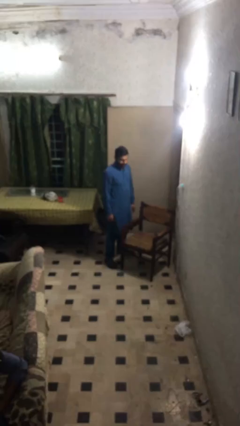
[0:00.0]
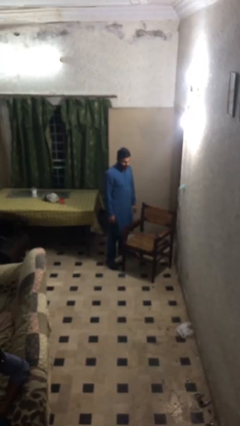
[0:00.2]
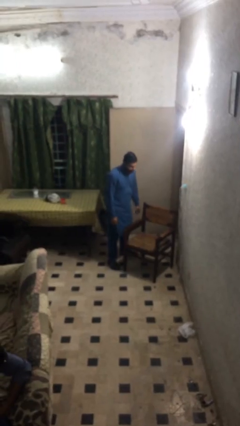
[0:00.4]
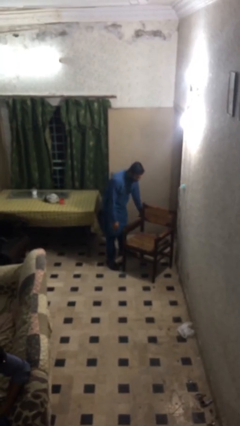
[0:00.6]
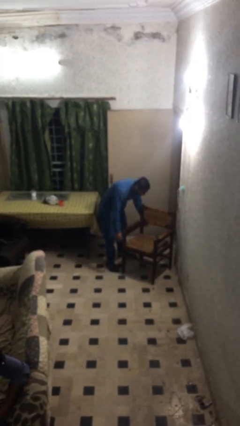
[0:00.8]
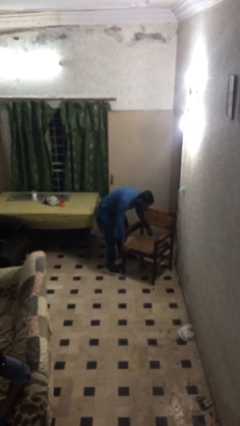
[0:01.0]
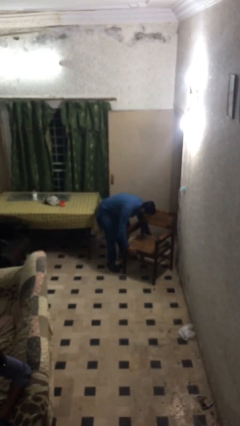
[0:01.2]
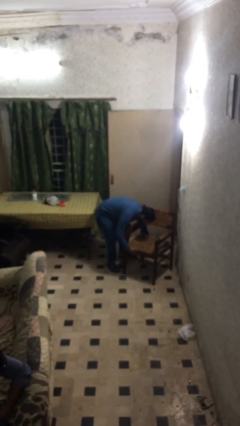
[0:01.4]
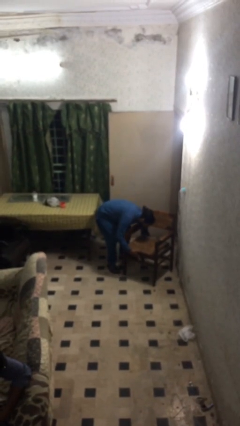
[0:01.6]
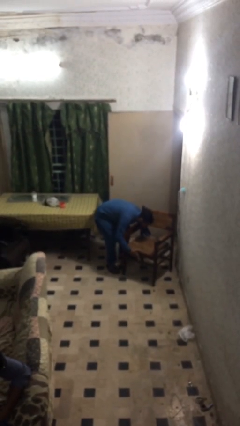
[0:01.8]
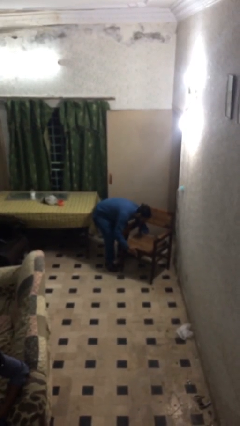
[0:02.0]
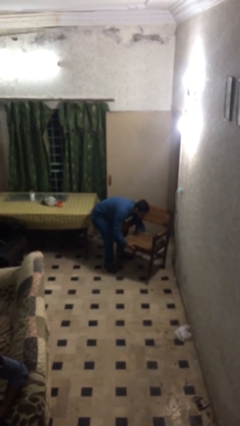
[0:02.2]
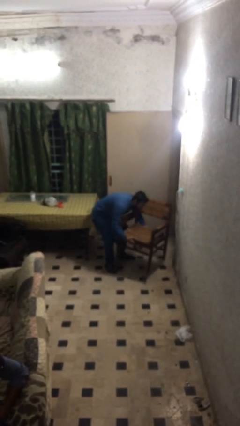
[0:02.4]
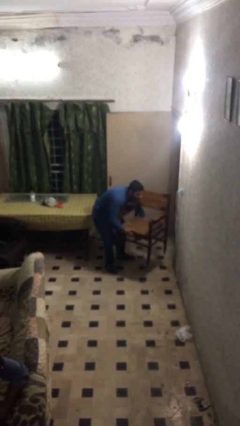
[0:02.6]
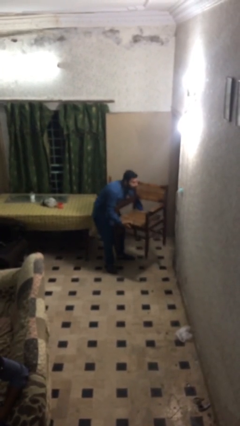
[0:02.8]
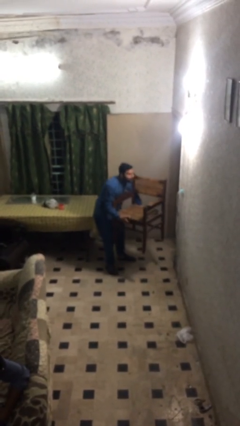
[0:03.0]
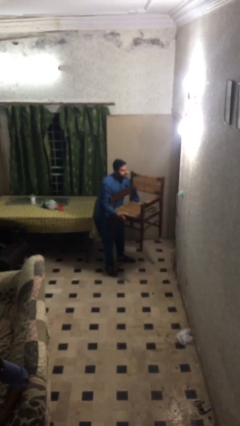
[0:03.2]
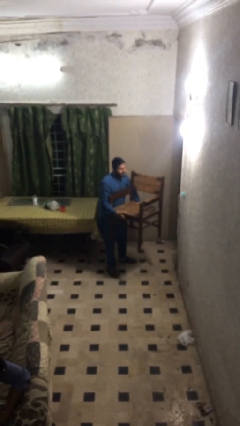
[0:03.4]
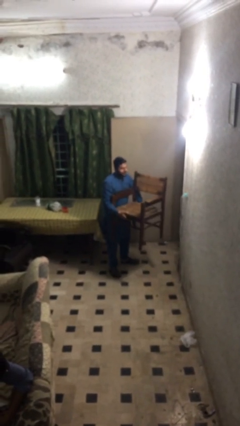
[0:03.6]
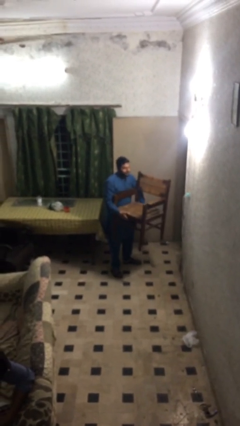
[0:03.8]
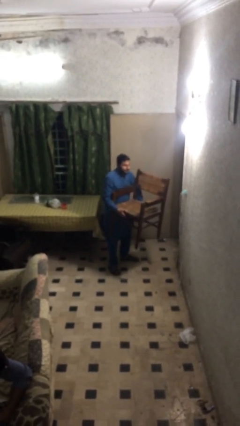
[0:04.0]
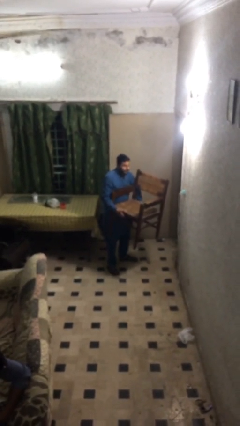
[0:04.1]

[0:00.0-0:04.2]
person picks up object from floor

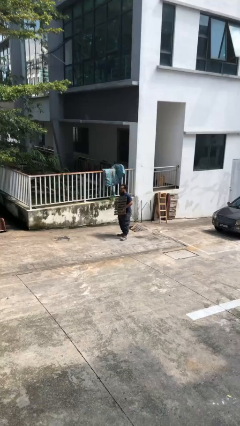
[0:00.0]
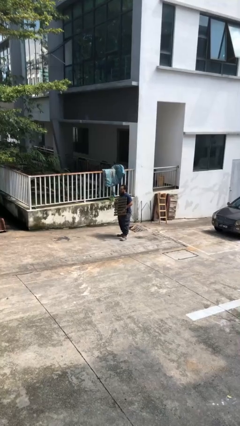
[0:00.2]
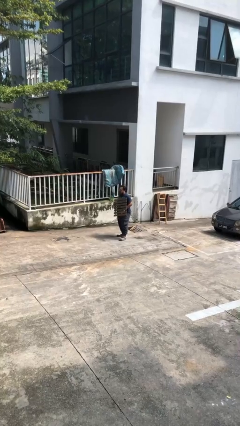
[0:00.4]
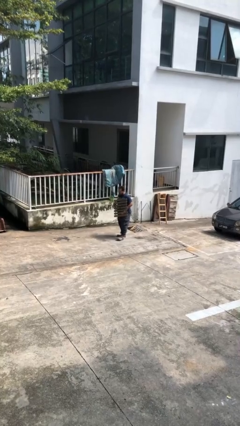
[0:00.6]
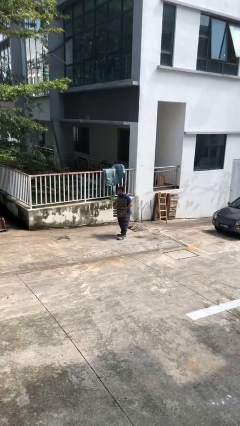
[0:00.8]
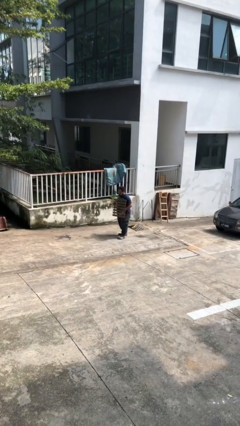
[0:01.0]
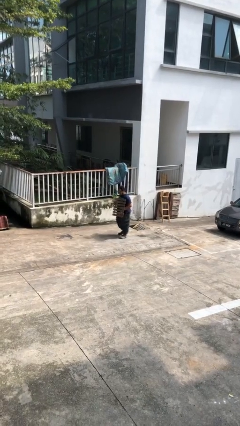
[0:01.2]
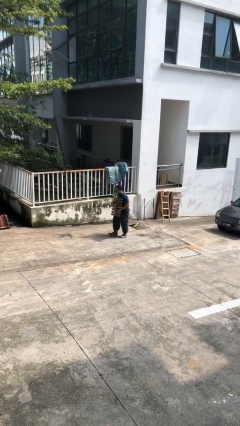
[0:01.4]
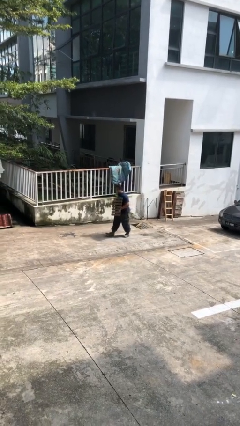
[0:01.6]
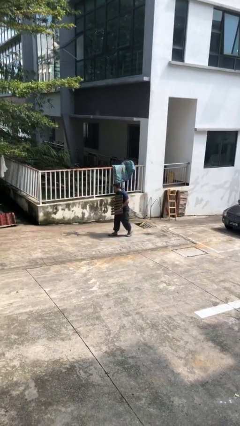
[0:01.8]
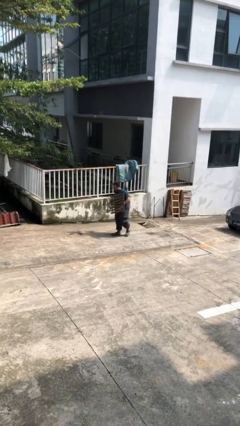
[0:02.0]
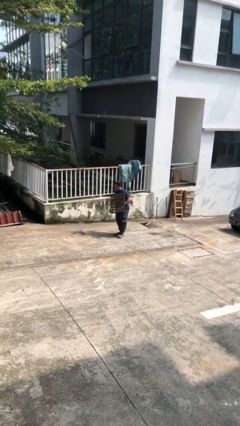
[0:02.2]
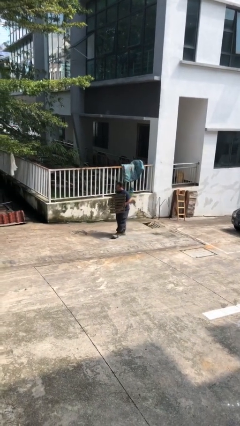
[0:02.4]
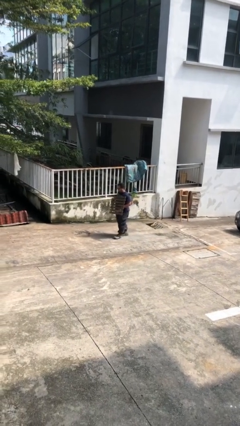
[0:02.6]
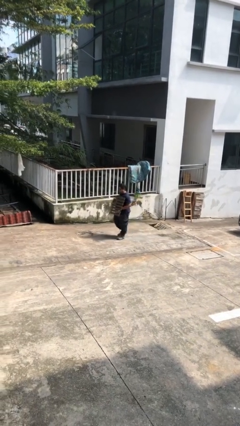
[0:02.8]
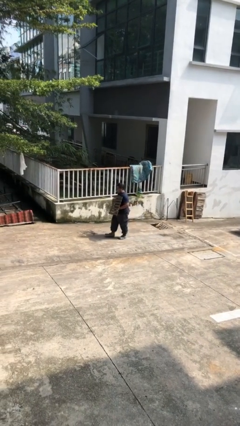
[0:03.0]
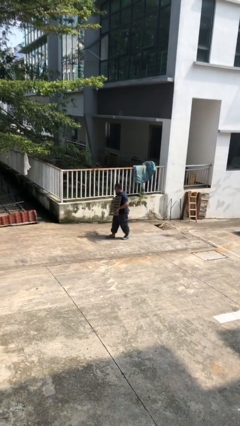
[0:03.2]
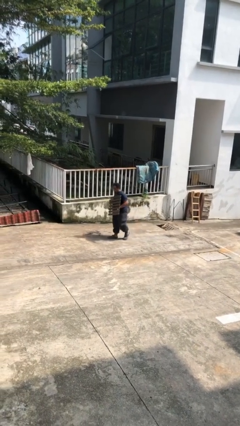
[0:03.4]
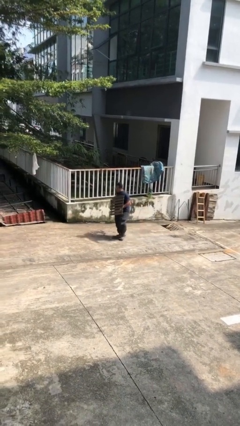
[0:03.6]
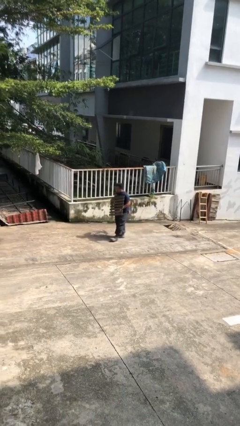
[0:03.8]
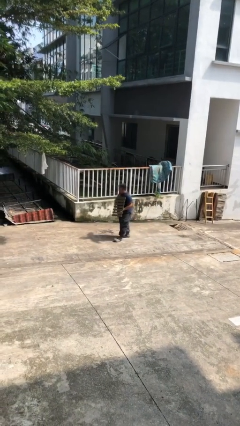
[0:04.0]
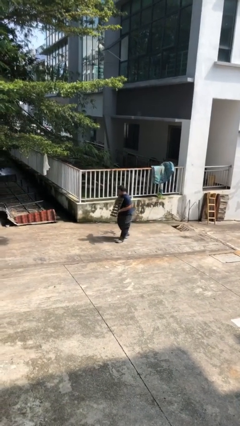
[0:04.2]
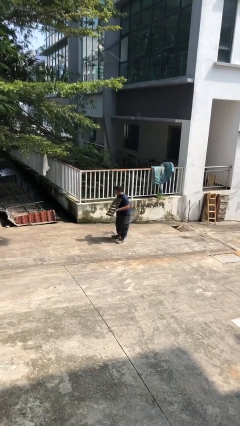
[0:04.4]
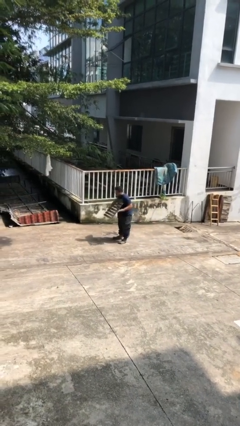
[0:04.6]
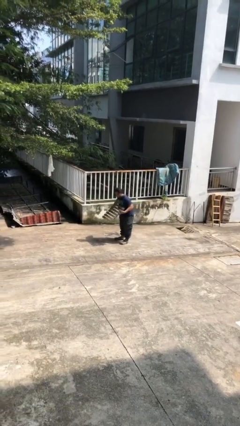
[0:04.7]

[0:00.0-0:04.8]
person carries heavy object

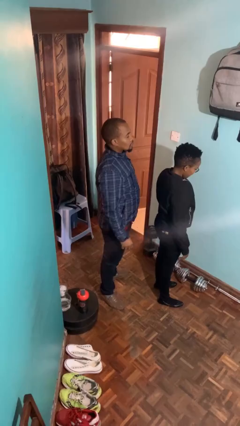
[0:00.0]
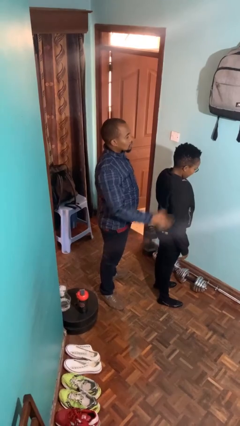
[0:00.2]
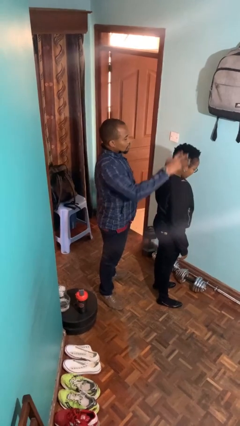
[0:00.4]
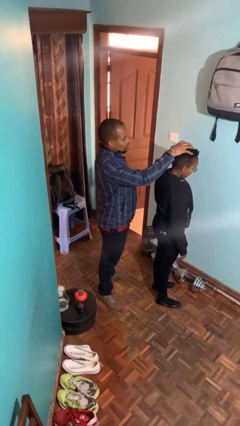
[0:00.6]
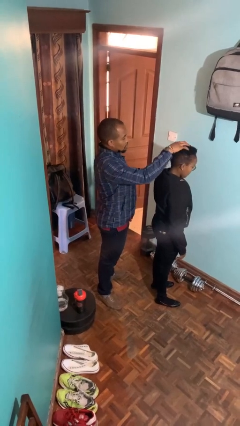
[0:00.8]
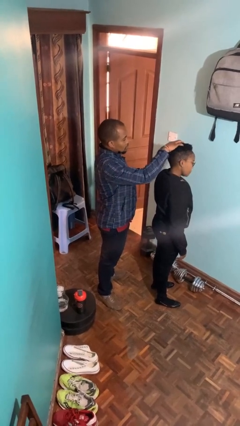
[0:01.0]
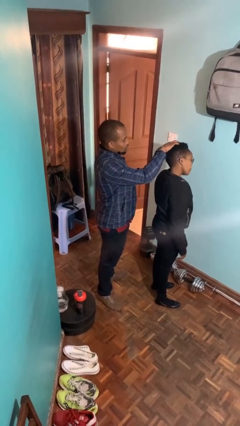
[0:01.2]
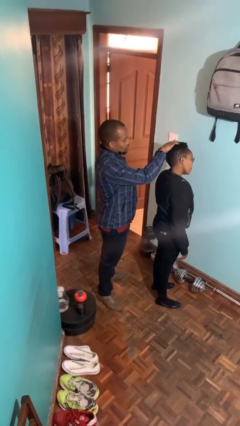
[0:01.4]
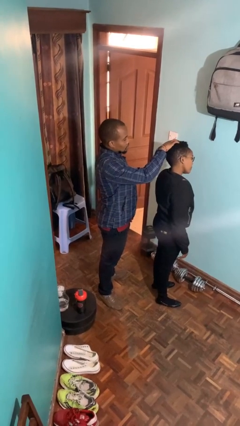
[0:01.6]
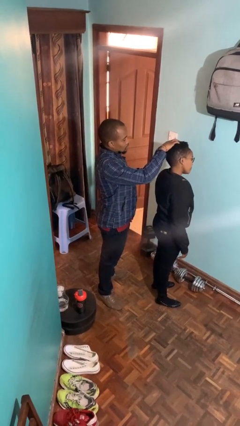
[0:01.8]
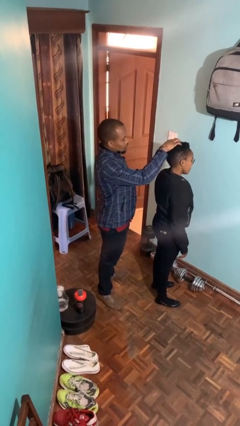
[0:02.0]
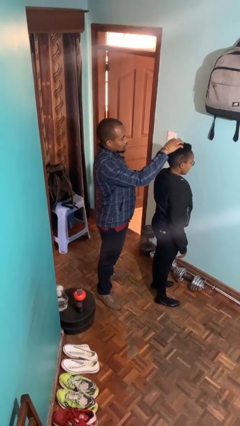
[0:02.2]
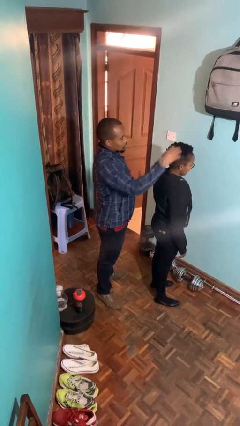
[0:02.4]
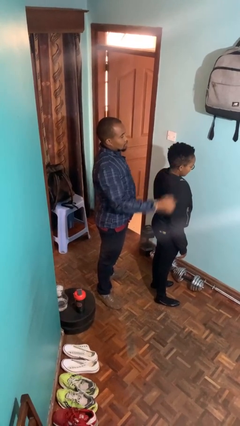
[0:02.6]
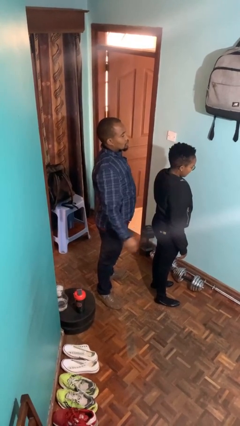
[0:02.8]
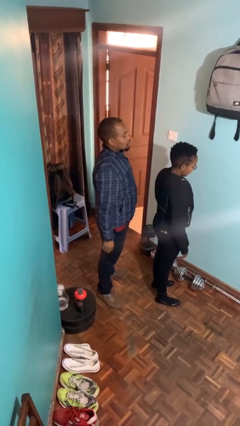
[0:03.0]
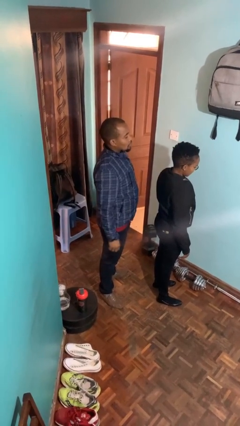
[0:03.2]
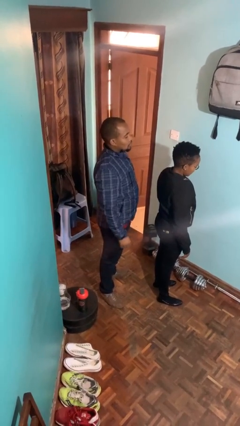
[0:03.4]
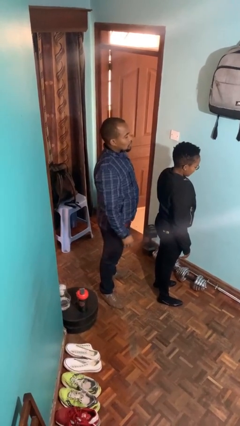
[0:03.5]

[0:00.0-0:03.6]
person grabs person by hair

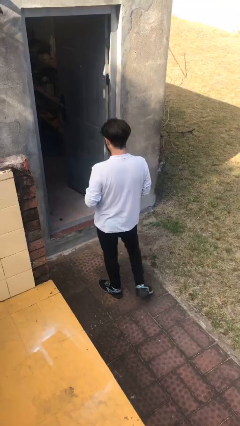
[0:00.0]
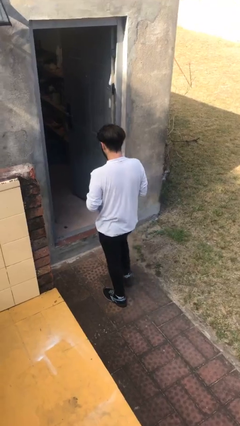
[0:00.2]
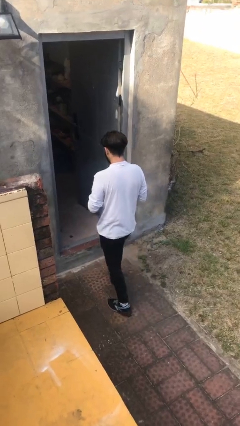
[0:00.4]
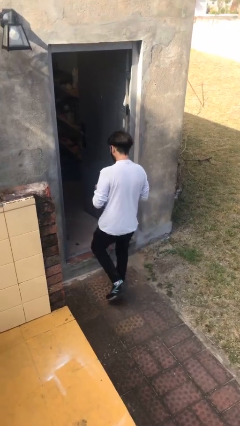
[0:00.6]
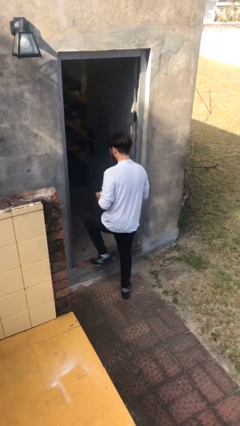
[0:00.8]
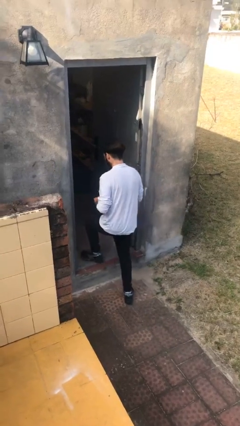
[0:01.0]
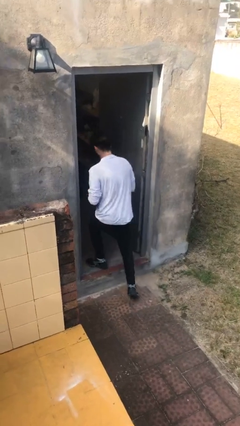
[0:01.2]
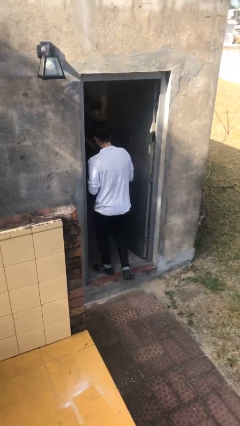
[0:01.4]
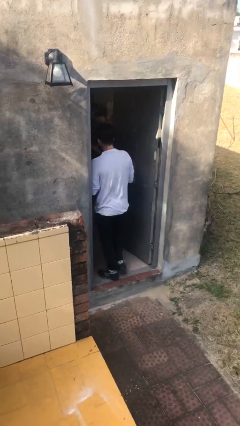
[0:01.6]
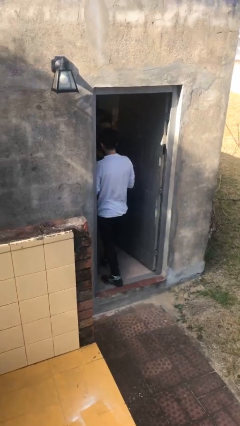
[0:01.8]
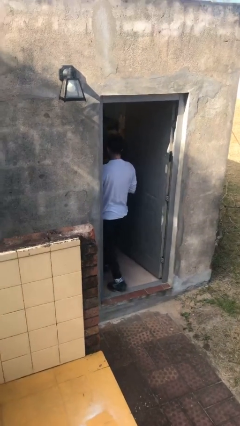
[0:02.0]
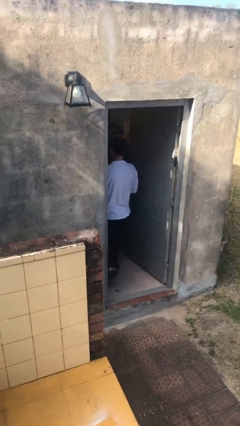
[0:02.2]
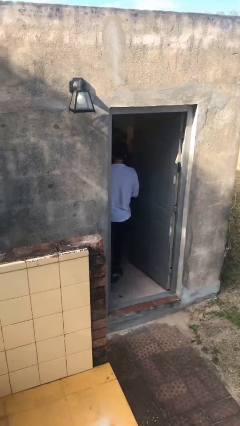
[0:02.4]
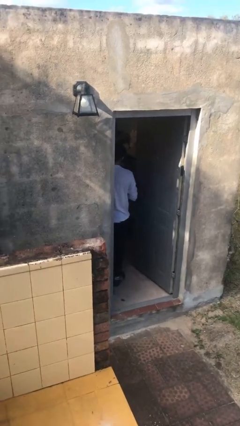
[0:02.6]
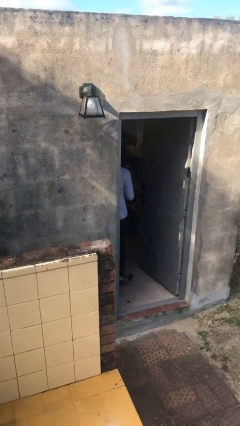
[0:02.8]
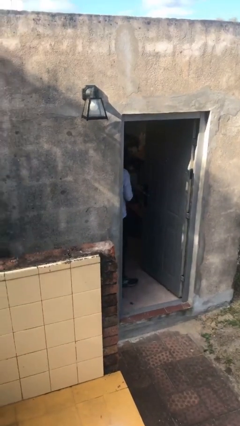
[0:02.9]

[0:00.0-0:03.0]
person exits scene through structure

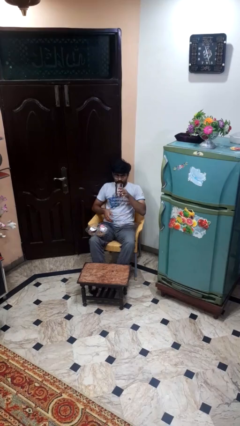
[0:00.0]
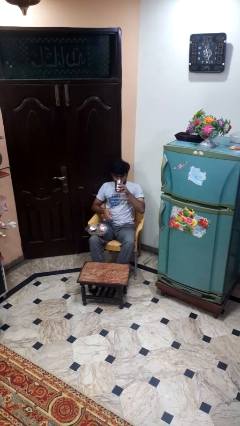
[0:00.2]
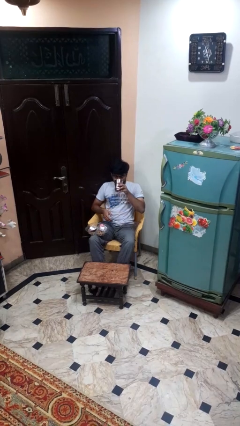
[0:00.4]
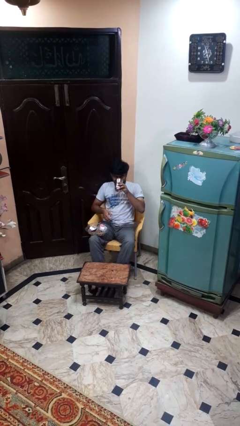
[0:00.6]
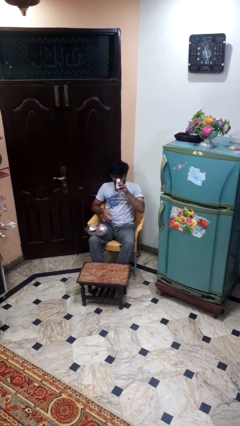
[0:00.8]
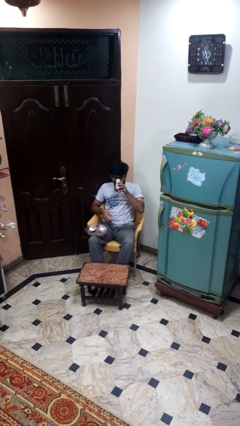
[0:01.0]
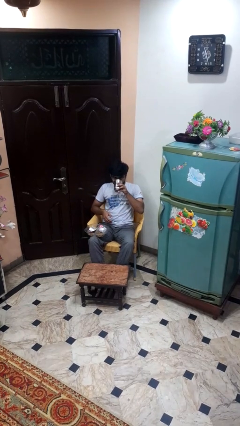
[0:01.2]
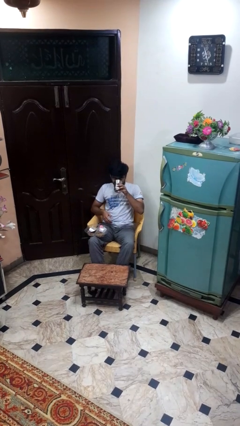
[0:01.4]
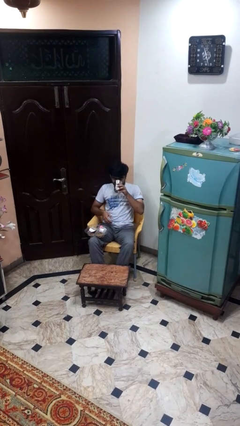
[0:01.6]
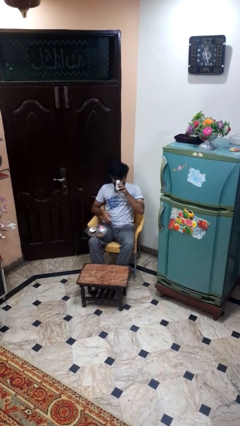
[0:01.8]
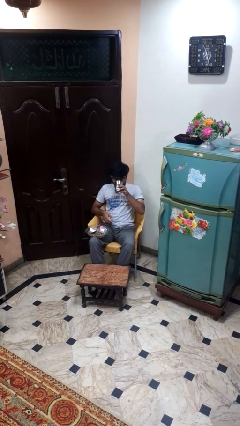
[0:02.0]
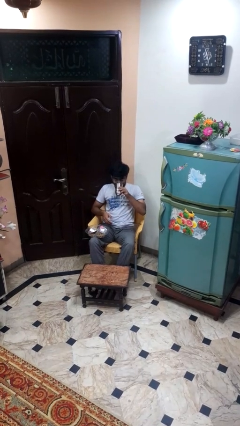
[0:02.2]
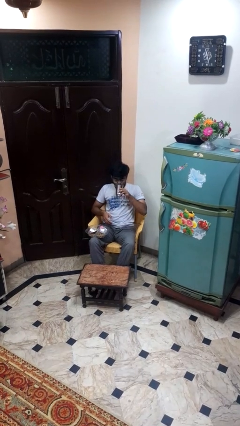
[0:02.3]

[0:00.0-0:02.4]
person drinks from cup
